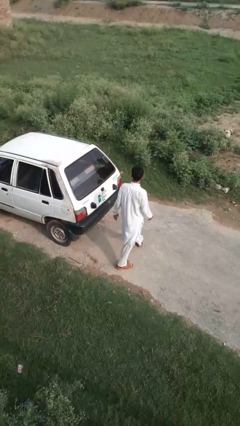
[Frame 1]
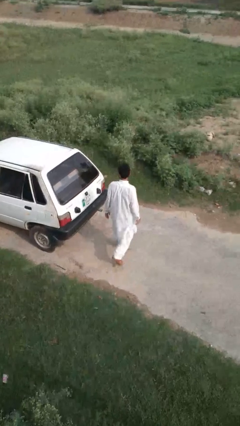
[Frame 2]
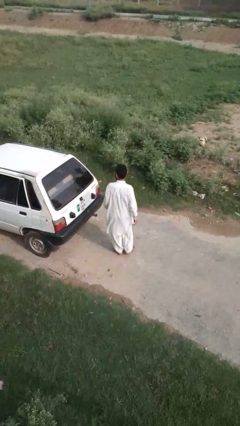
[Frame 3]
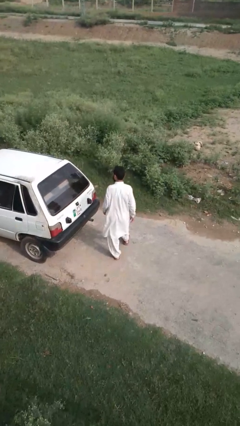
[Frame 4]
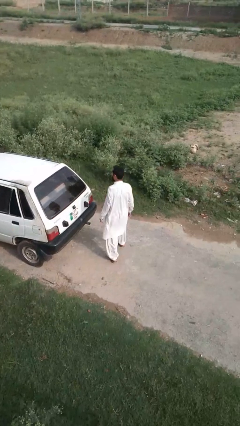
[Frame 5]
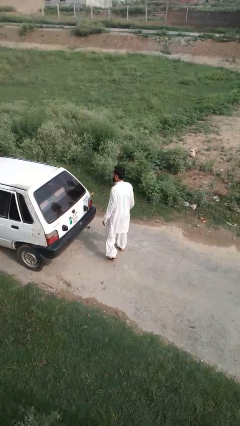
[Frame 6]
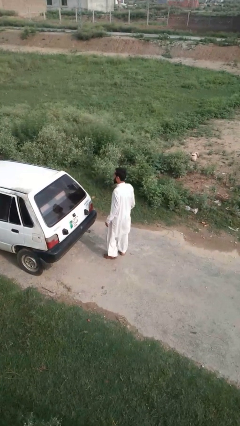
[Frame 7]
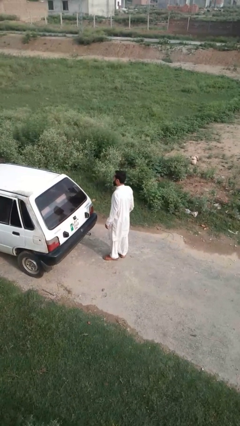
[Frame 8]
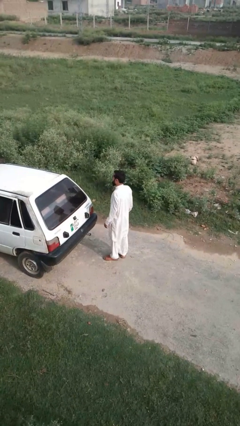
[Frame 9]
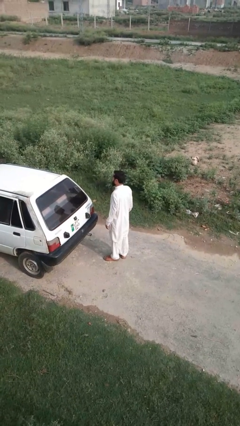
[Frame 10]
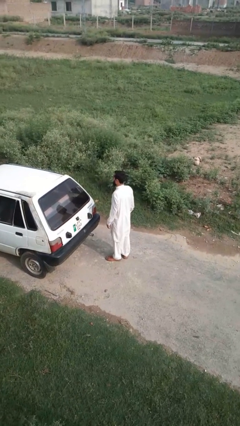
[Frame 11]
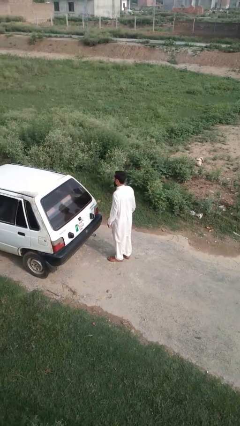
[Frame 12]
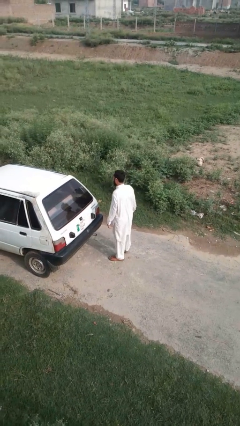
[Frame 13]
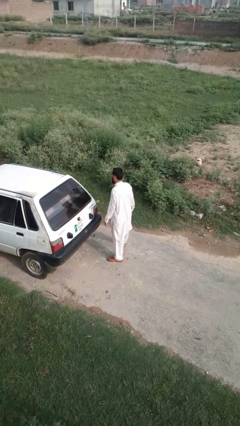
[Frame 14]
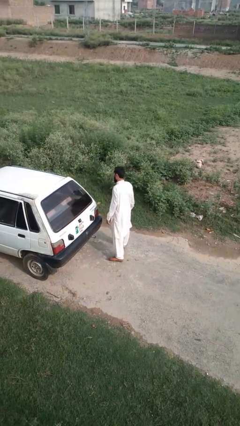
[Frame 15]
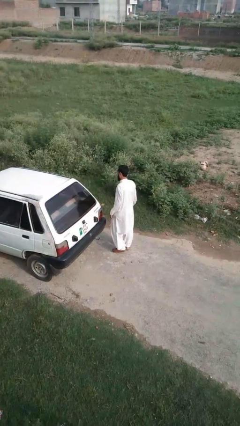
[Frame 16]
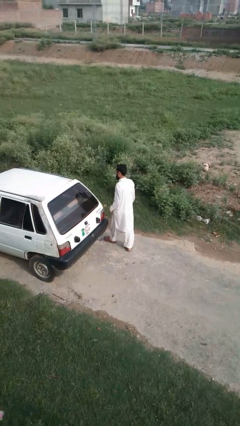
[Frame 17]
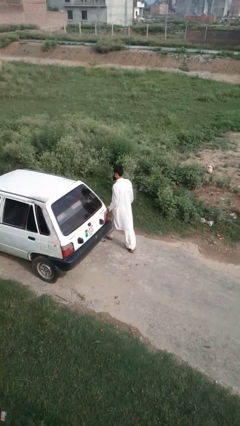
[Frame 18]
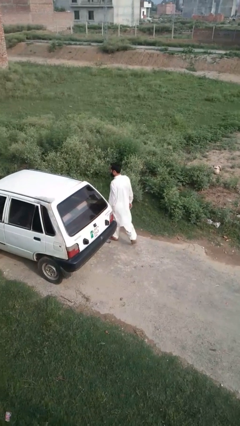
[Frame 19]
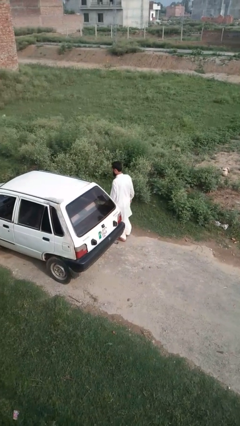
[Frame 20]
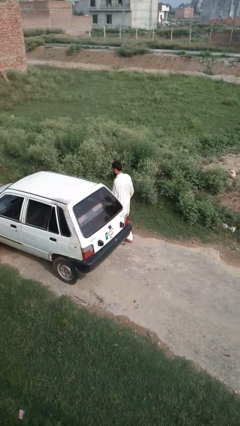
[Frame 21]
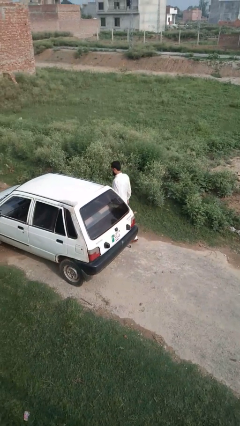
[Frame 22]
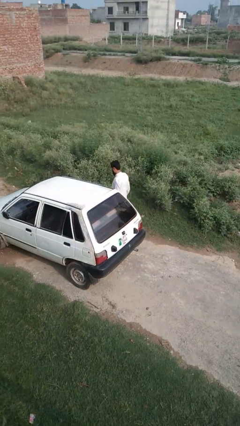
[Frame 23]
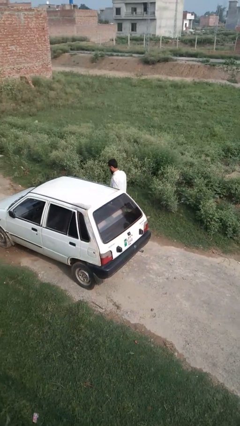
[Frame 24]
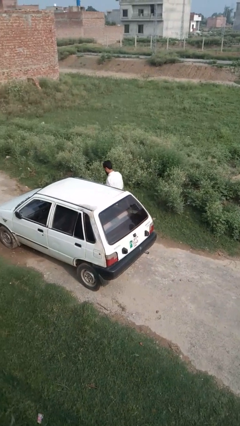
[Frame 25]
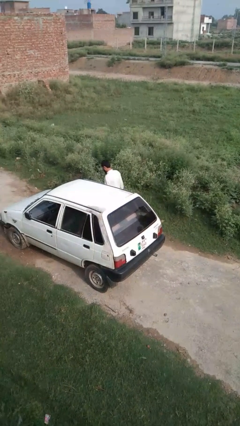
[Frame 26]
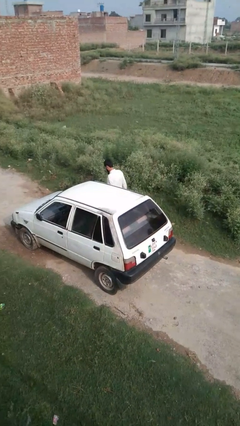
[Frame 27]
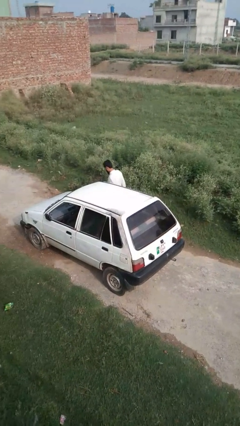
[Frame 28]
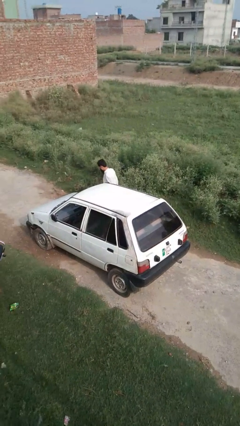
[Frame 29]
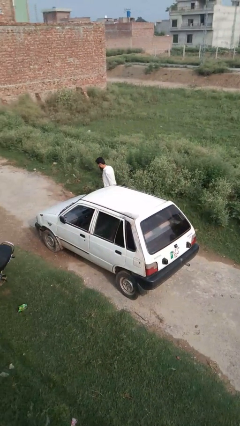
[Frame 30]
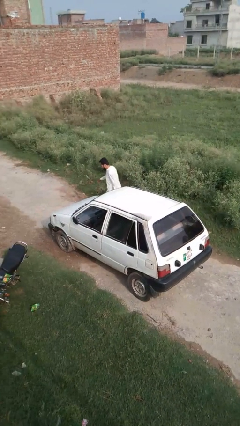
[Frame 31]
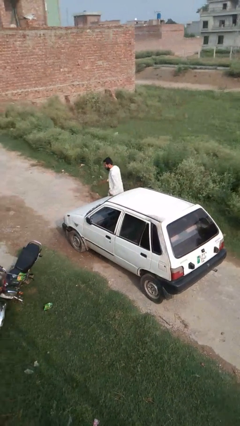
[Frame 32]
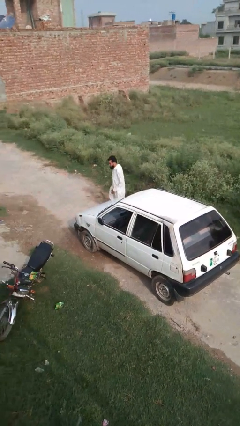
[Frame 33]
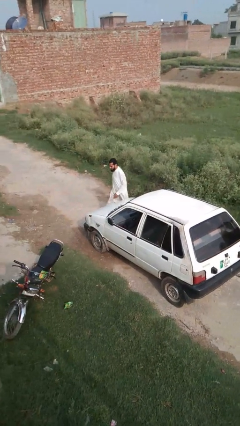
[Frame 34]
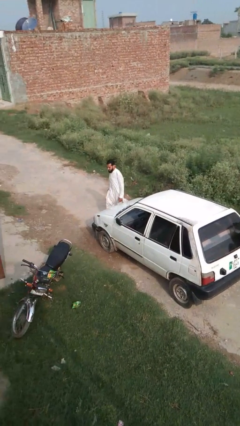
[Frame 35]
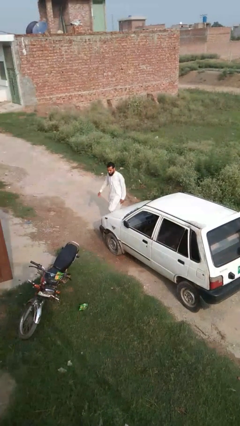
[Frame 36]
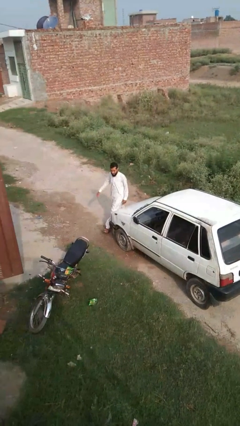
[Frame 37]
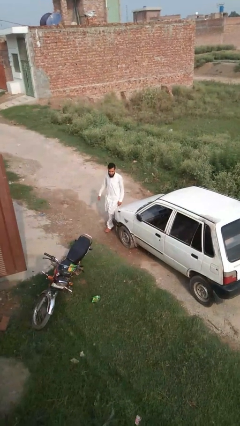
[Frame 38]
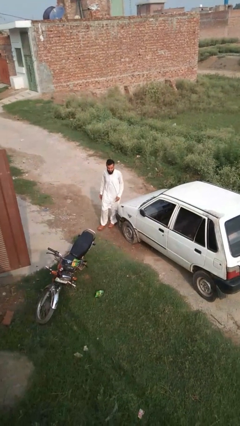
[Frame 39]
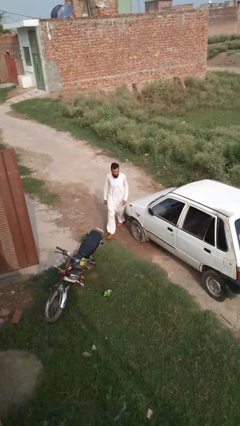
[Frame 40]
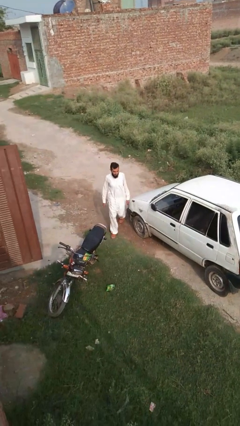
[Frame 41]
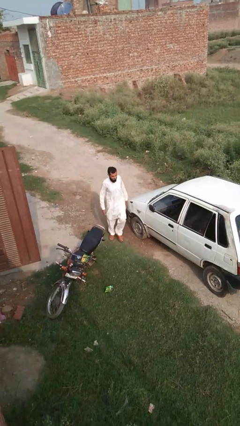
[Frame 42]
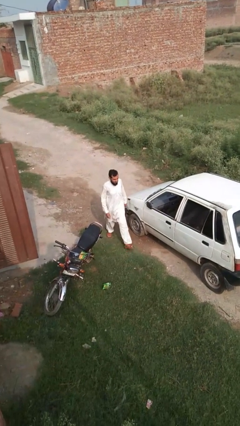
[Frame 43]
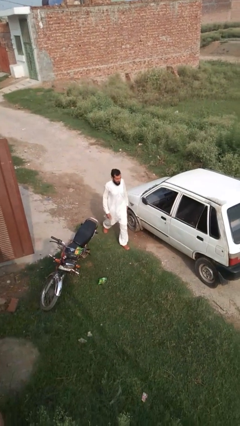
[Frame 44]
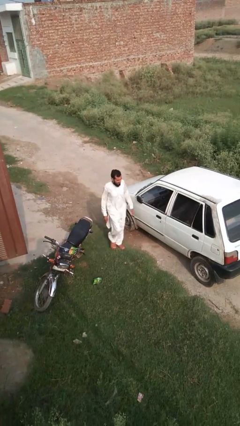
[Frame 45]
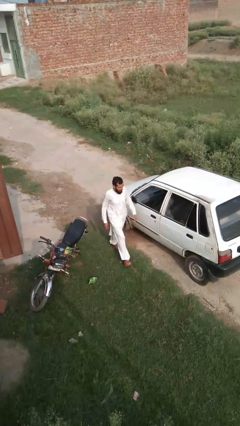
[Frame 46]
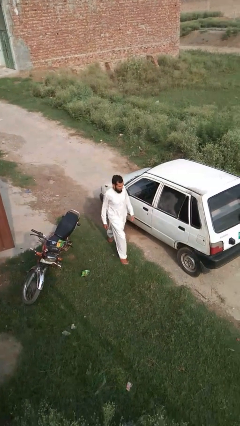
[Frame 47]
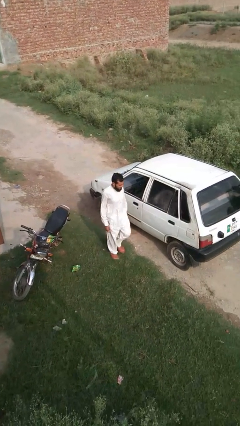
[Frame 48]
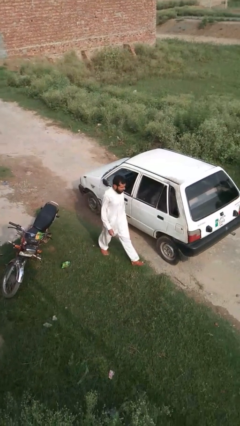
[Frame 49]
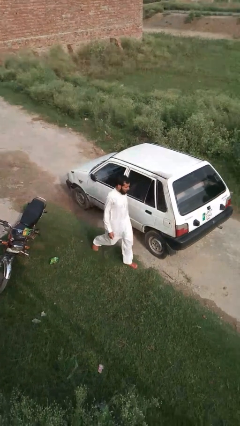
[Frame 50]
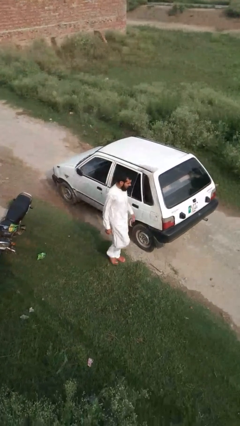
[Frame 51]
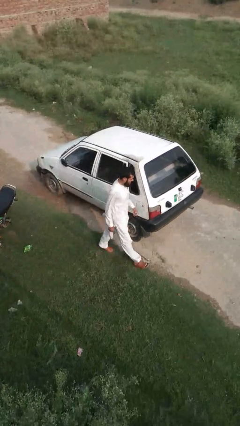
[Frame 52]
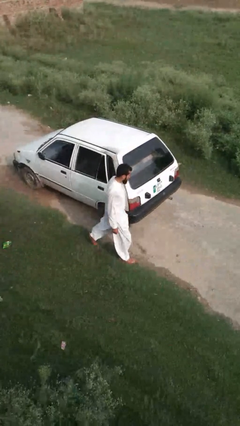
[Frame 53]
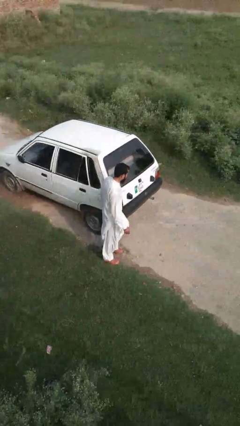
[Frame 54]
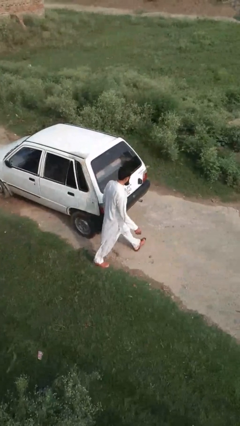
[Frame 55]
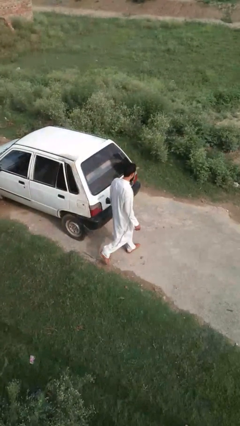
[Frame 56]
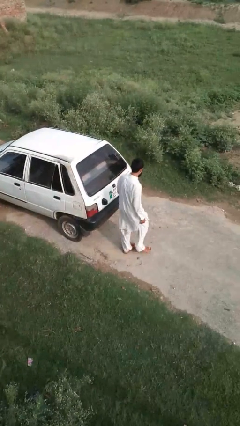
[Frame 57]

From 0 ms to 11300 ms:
person walks around car

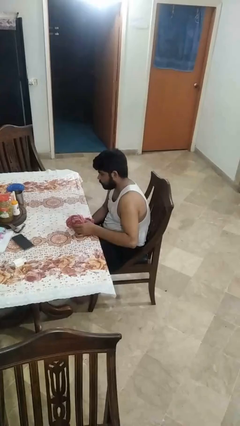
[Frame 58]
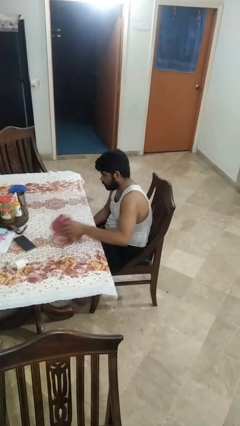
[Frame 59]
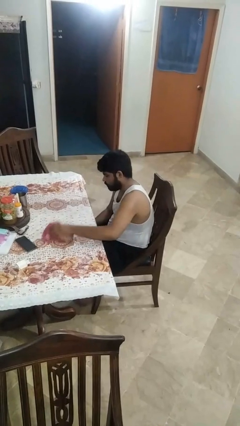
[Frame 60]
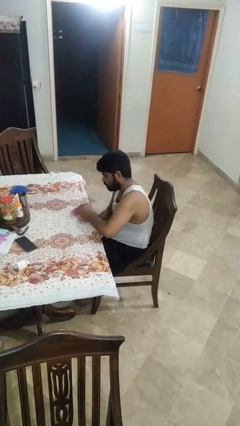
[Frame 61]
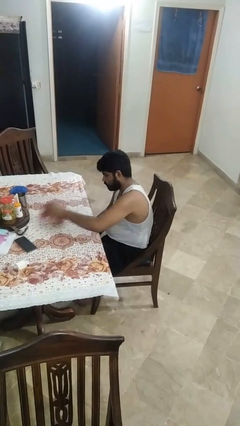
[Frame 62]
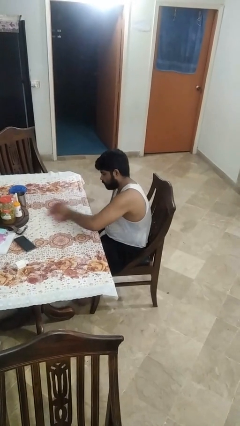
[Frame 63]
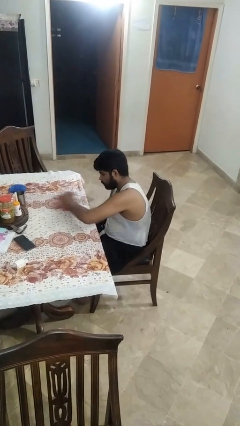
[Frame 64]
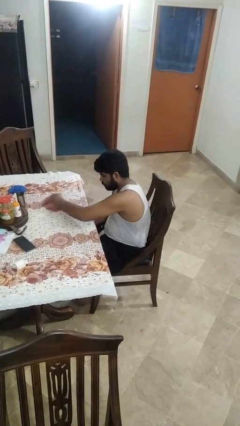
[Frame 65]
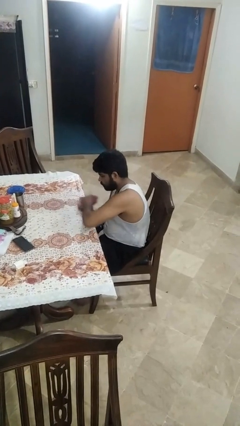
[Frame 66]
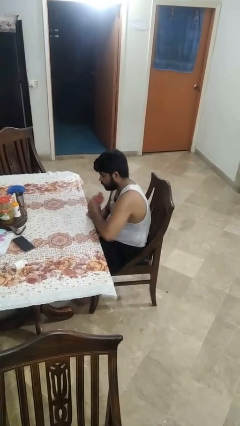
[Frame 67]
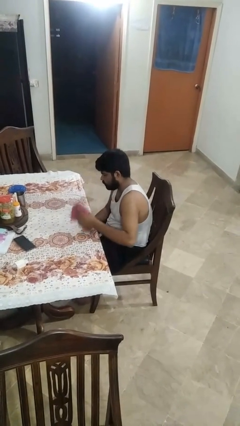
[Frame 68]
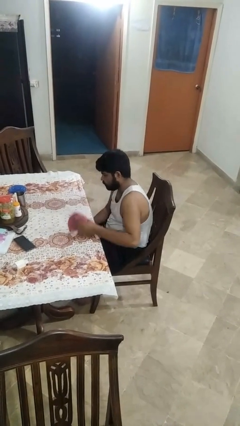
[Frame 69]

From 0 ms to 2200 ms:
person cleans table with rag

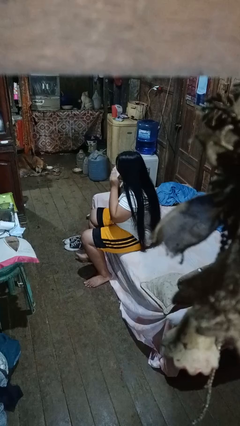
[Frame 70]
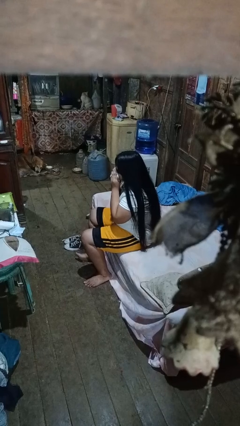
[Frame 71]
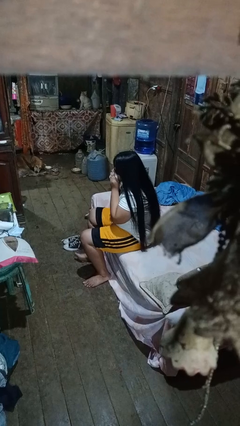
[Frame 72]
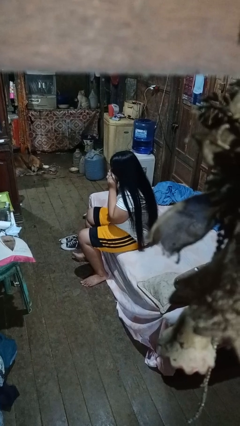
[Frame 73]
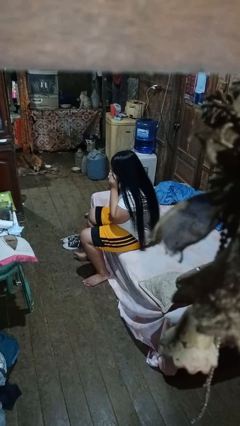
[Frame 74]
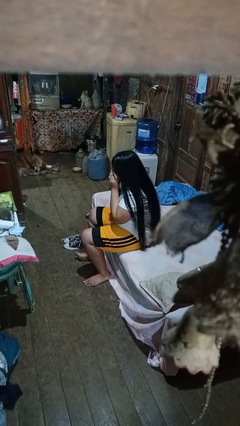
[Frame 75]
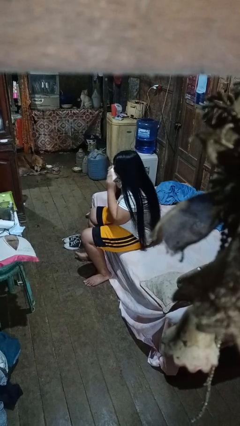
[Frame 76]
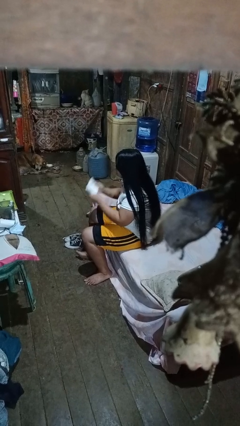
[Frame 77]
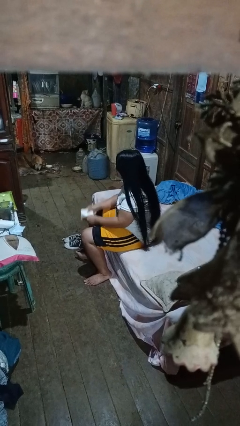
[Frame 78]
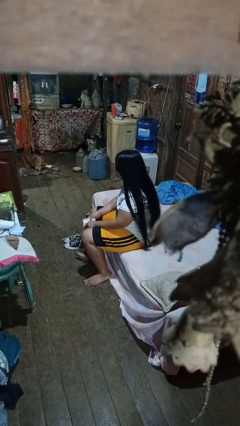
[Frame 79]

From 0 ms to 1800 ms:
person blows nose

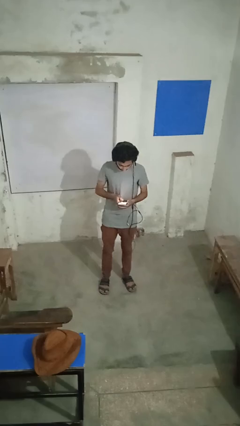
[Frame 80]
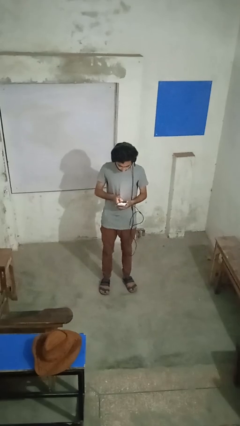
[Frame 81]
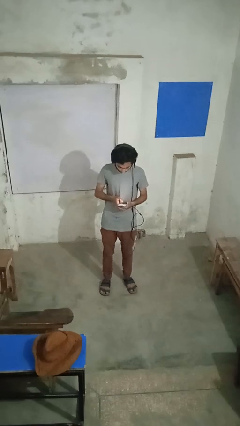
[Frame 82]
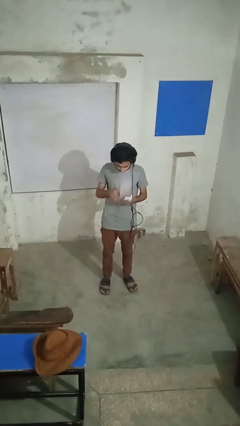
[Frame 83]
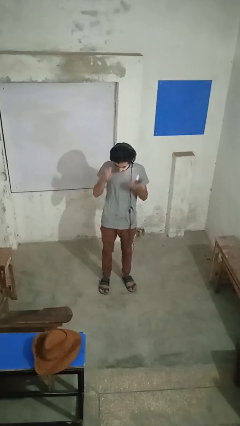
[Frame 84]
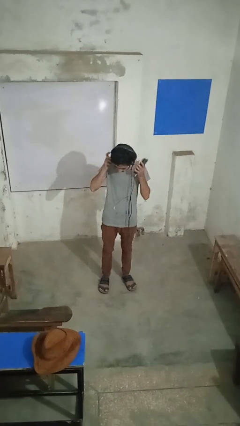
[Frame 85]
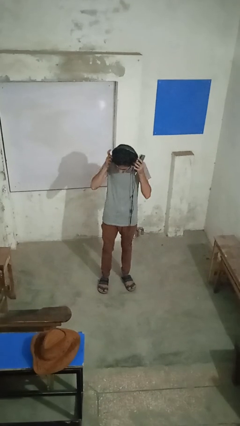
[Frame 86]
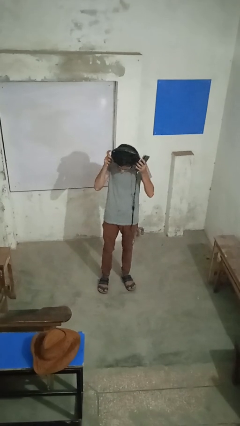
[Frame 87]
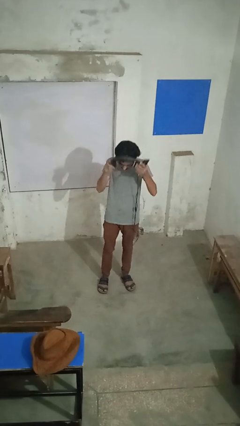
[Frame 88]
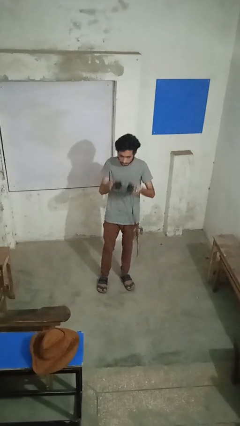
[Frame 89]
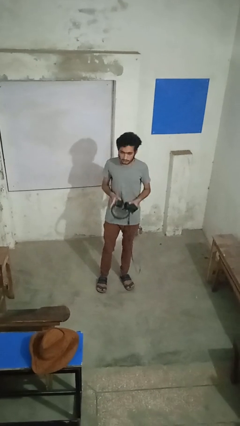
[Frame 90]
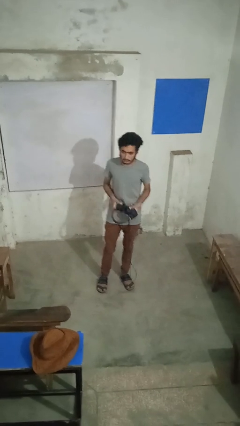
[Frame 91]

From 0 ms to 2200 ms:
person takes off headphones

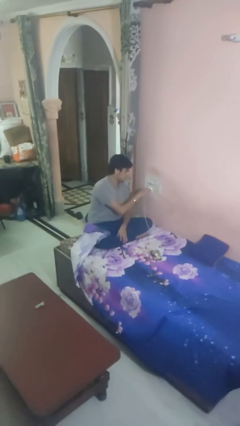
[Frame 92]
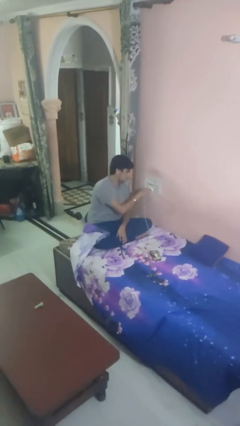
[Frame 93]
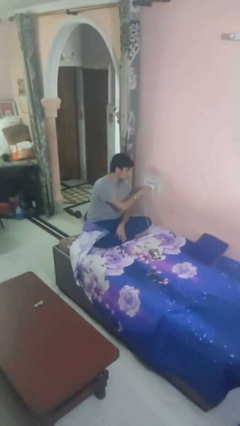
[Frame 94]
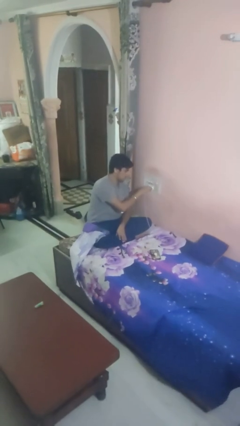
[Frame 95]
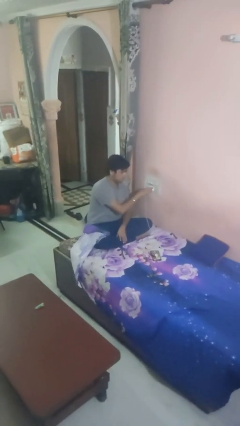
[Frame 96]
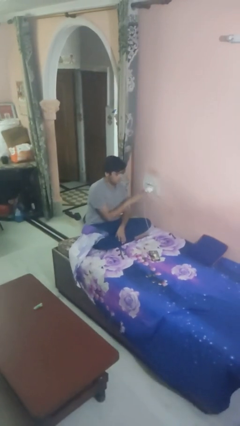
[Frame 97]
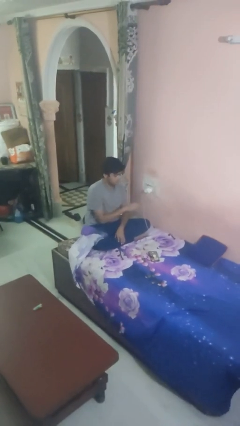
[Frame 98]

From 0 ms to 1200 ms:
person plugs into electrical socket
